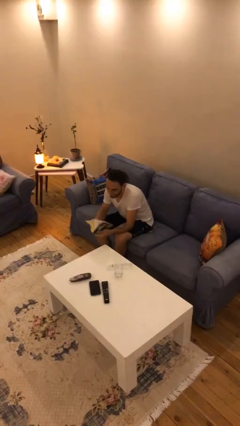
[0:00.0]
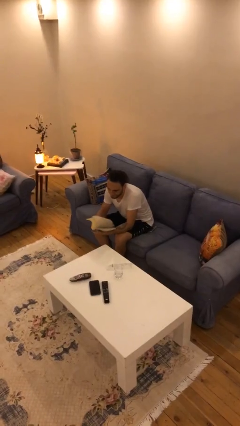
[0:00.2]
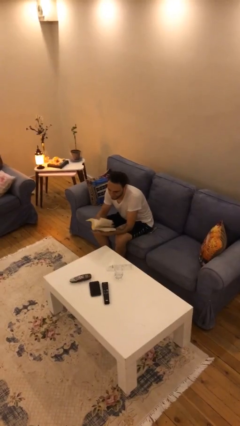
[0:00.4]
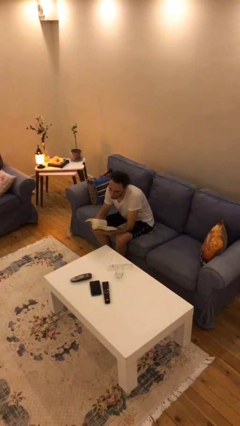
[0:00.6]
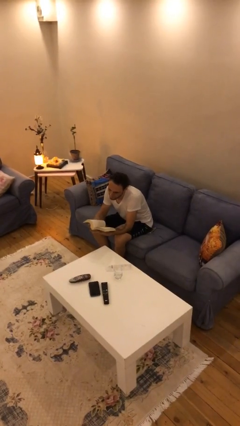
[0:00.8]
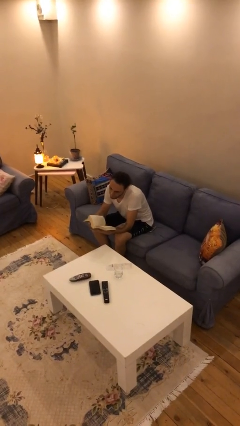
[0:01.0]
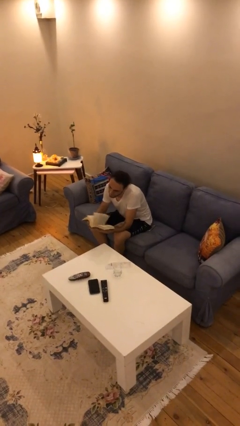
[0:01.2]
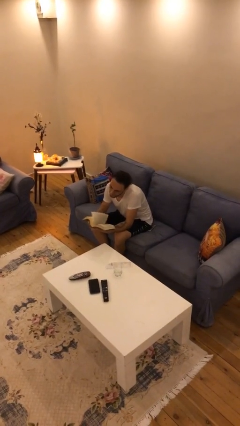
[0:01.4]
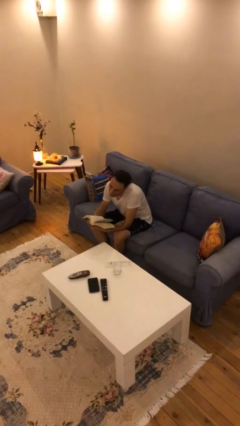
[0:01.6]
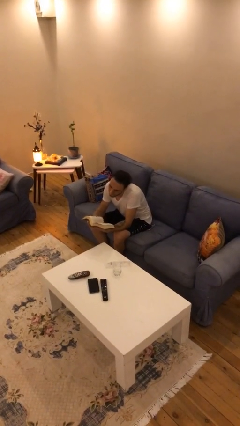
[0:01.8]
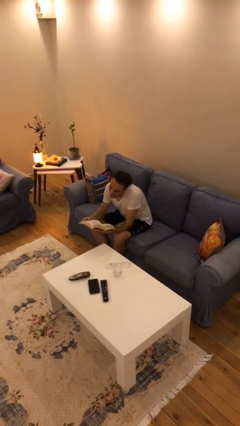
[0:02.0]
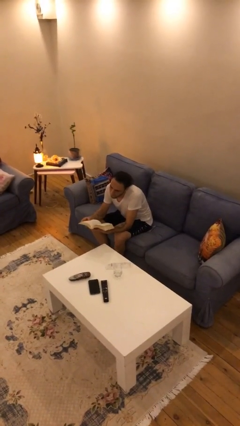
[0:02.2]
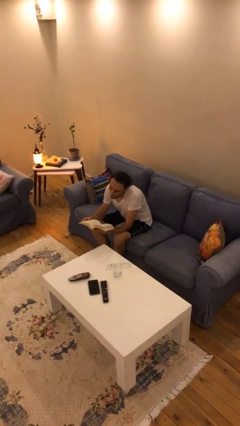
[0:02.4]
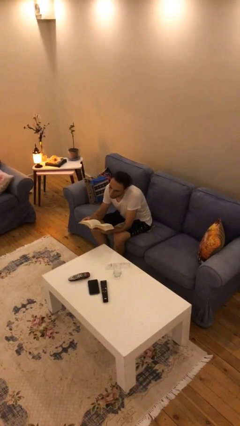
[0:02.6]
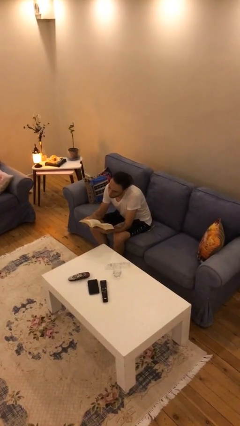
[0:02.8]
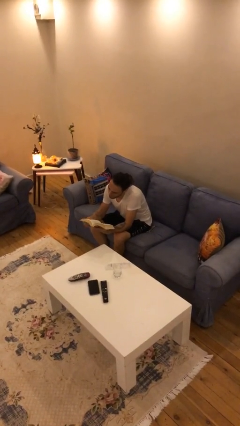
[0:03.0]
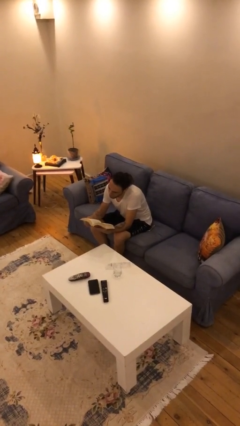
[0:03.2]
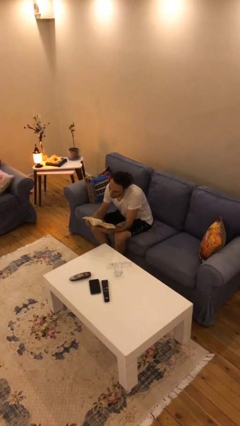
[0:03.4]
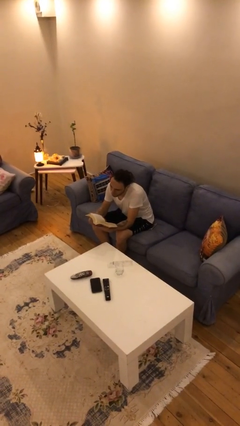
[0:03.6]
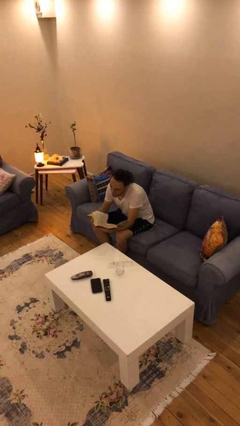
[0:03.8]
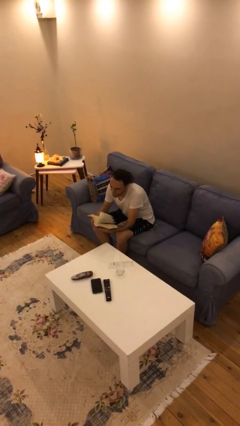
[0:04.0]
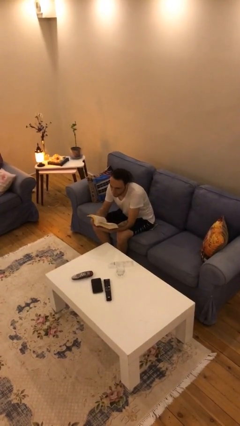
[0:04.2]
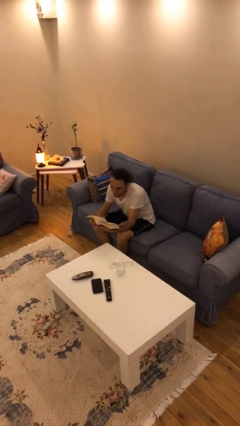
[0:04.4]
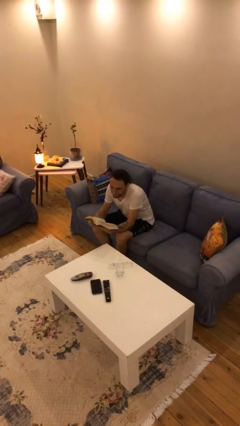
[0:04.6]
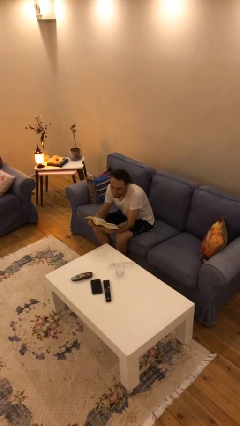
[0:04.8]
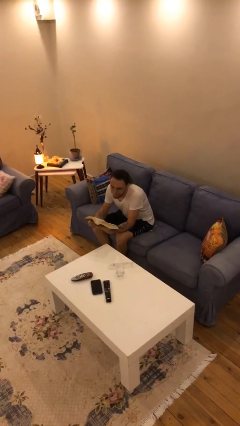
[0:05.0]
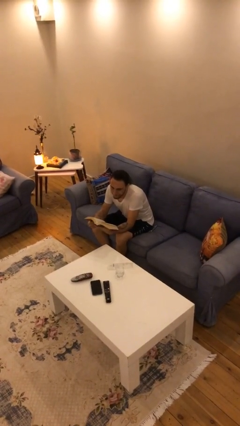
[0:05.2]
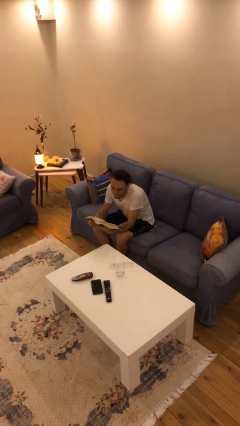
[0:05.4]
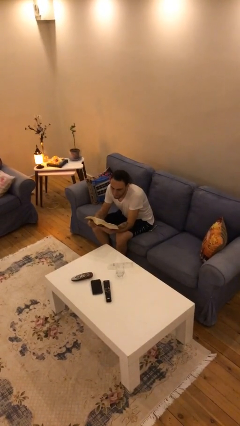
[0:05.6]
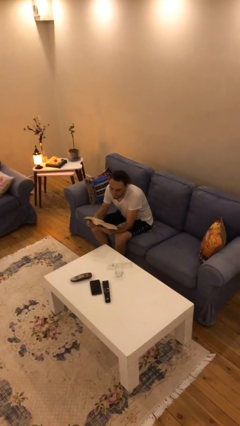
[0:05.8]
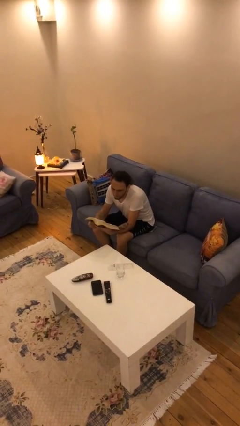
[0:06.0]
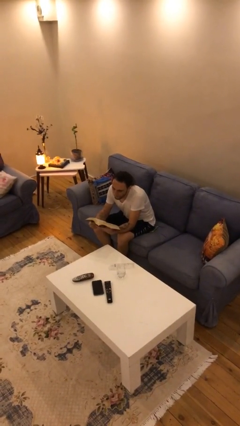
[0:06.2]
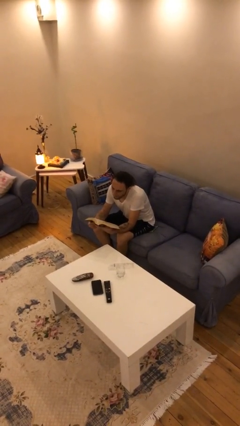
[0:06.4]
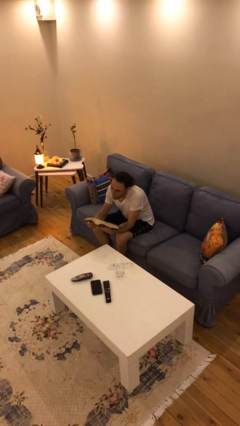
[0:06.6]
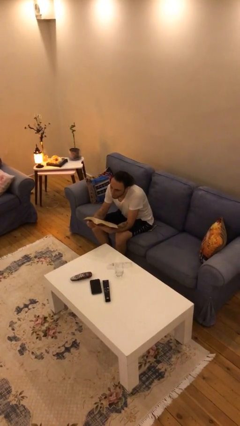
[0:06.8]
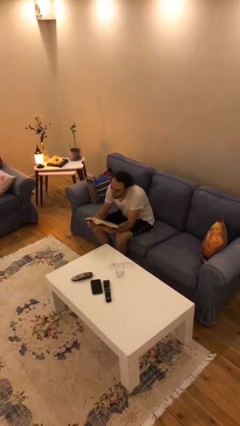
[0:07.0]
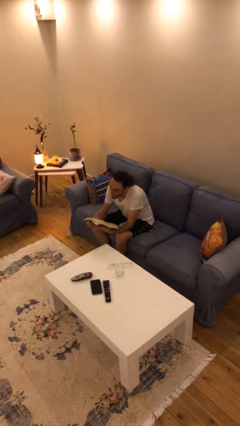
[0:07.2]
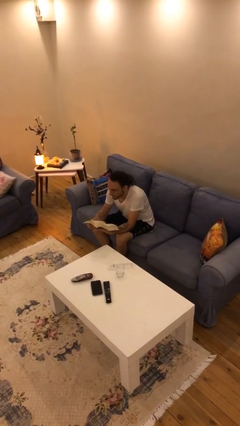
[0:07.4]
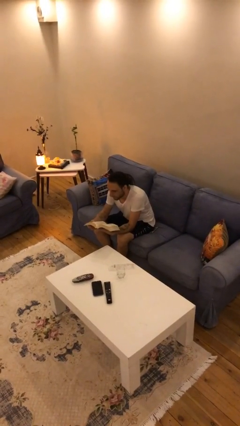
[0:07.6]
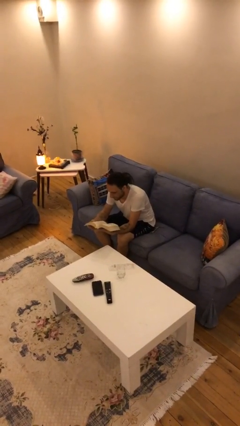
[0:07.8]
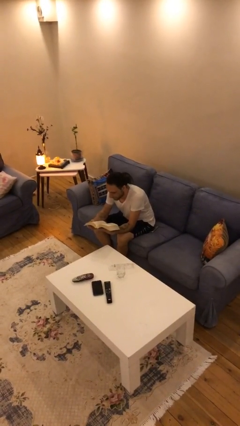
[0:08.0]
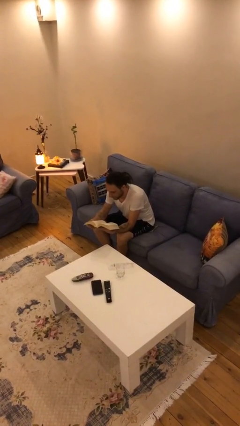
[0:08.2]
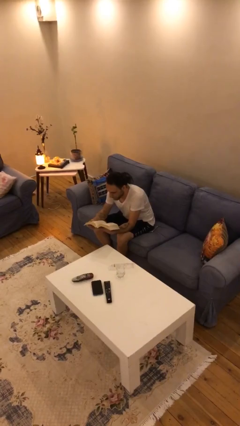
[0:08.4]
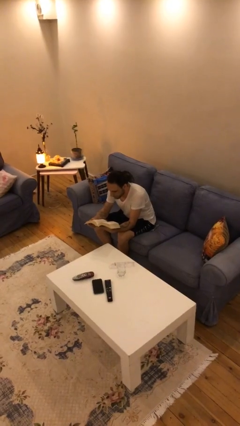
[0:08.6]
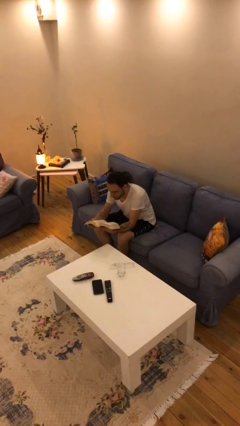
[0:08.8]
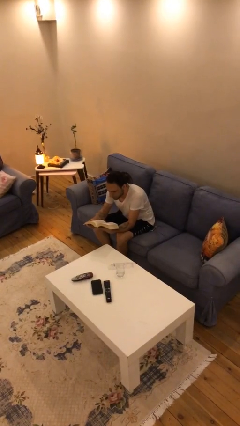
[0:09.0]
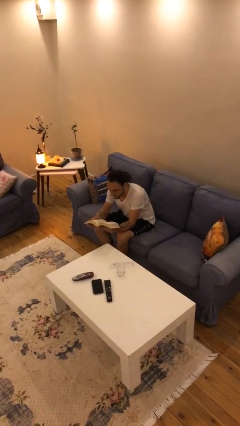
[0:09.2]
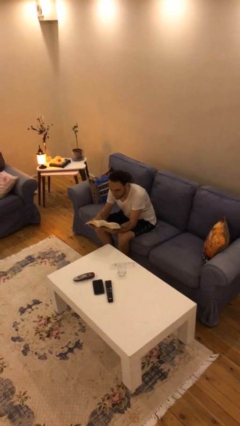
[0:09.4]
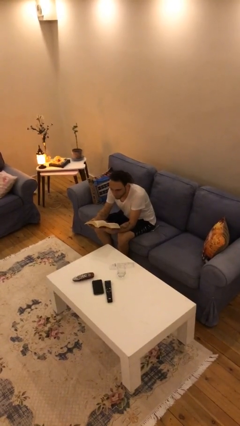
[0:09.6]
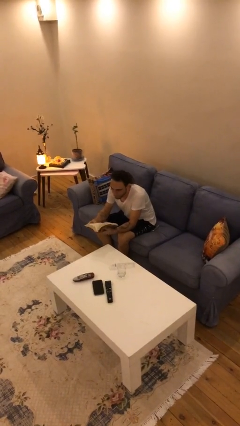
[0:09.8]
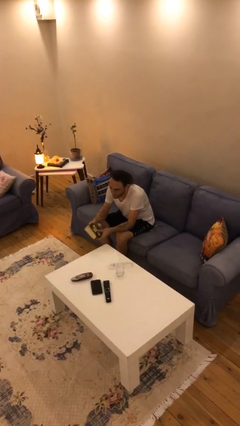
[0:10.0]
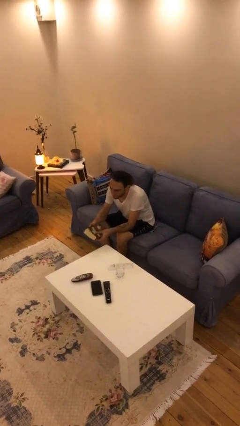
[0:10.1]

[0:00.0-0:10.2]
person reads document

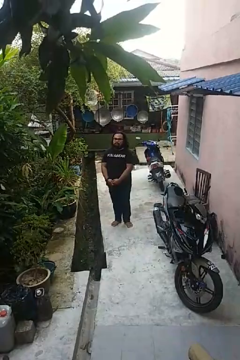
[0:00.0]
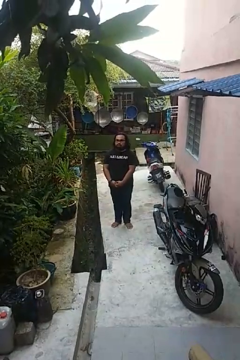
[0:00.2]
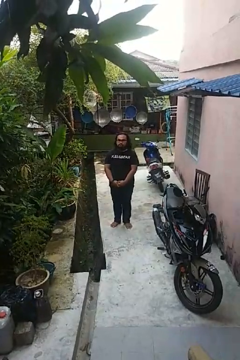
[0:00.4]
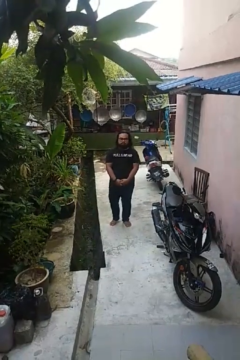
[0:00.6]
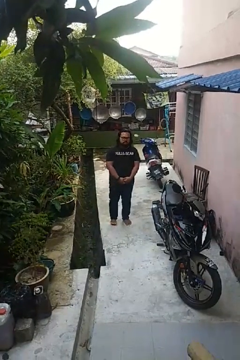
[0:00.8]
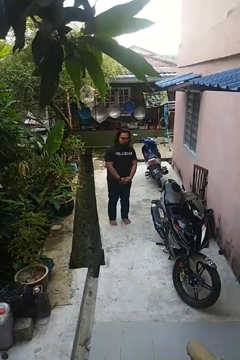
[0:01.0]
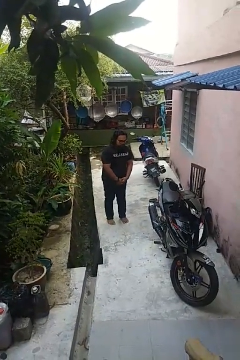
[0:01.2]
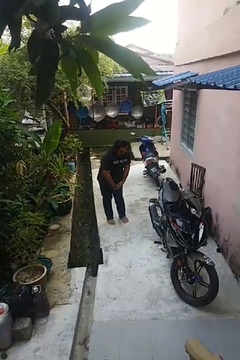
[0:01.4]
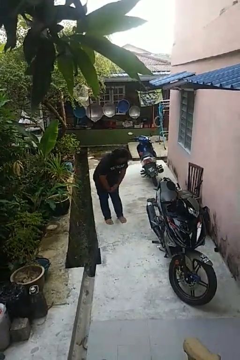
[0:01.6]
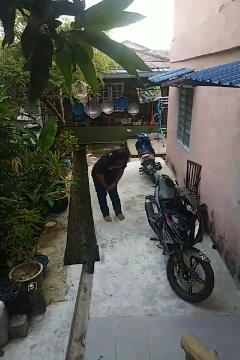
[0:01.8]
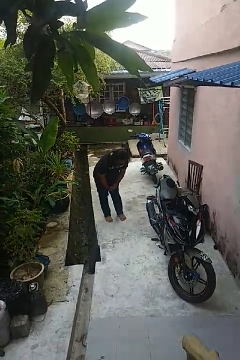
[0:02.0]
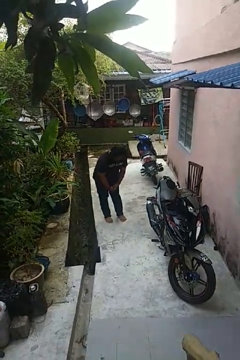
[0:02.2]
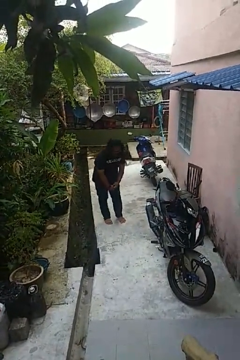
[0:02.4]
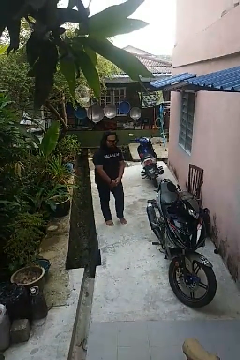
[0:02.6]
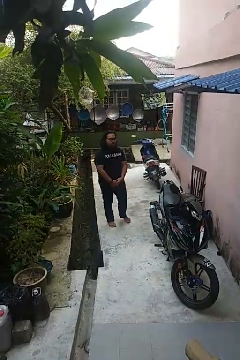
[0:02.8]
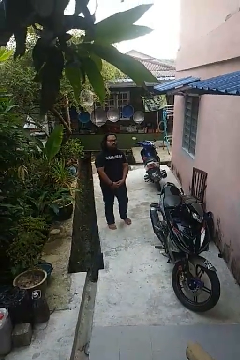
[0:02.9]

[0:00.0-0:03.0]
person bows

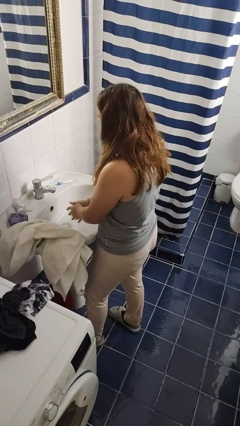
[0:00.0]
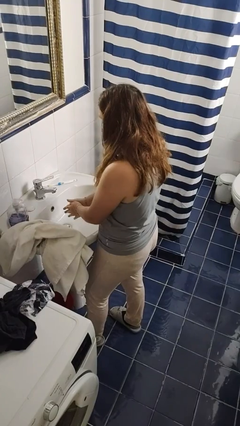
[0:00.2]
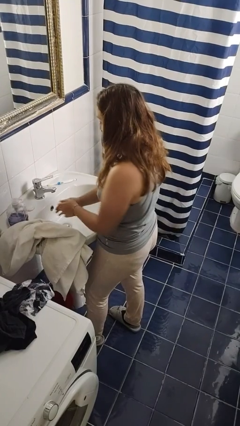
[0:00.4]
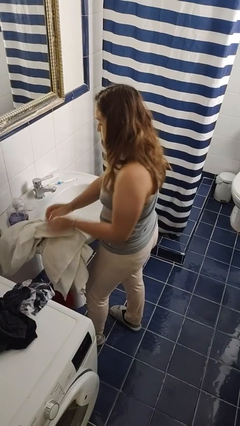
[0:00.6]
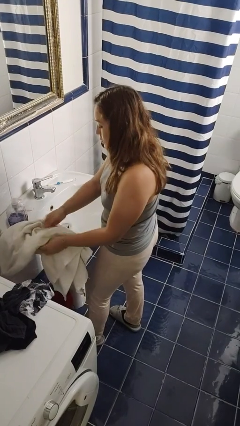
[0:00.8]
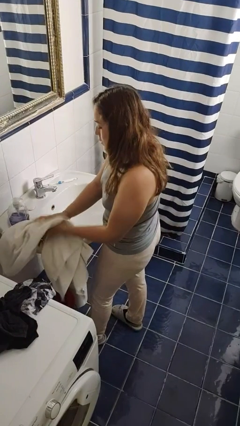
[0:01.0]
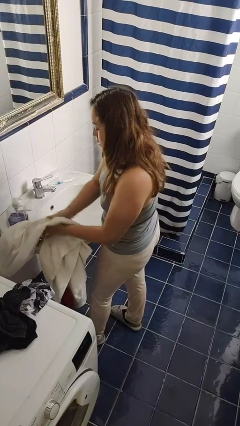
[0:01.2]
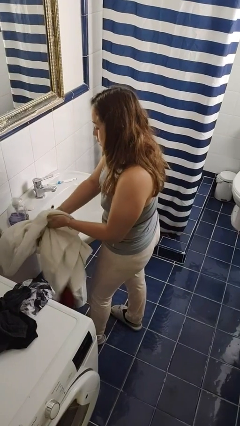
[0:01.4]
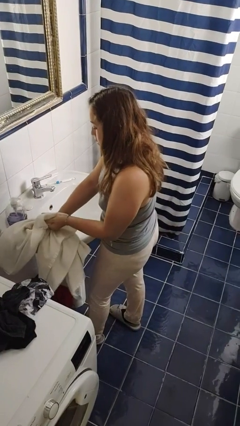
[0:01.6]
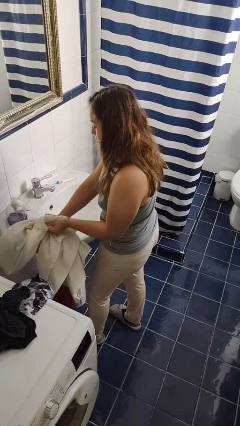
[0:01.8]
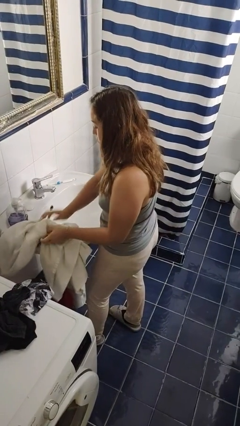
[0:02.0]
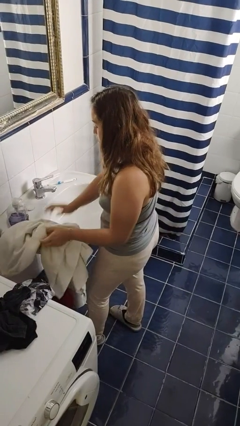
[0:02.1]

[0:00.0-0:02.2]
person dries hands with towel

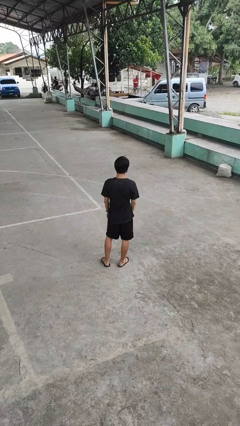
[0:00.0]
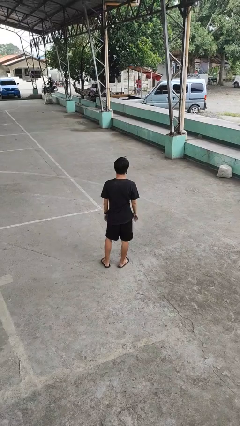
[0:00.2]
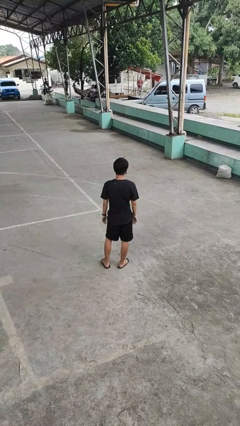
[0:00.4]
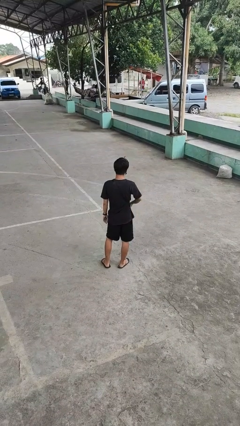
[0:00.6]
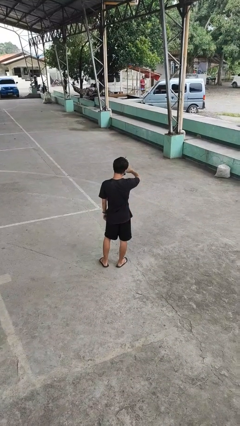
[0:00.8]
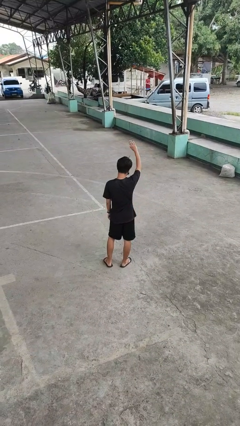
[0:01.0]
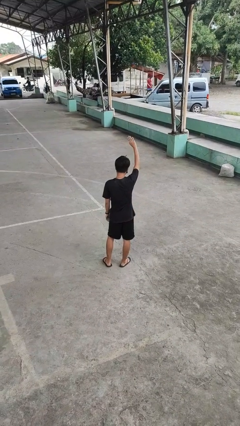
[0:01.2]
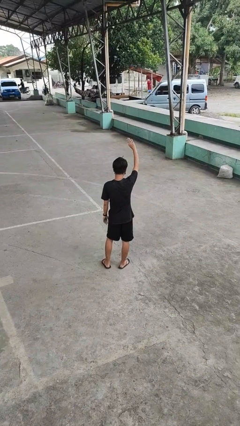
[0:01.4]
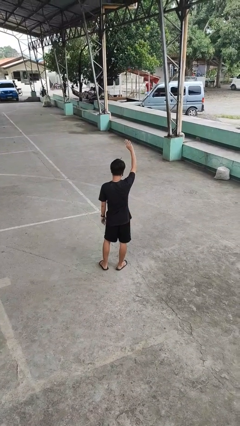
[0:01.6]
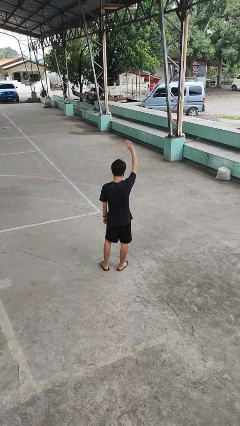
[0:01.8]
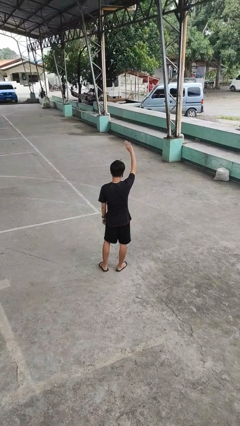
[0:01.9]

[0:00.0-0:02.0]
person gestures swipe up

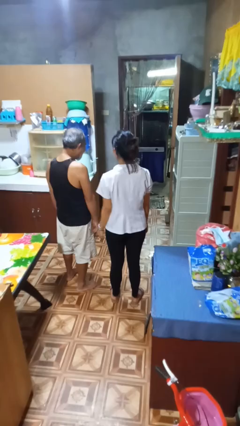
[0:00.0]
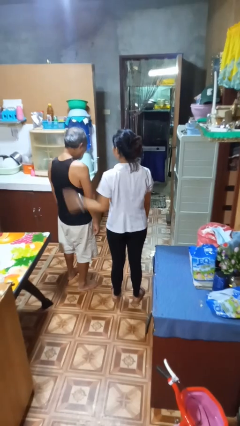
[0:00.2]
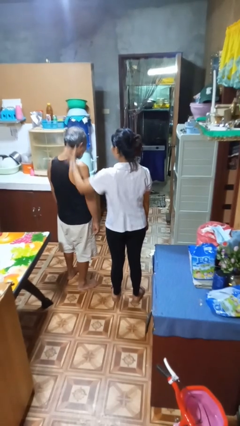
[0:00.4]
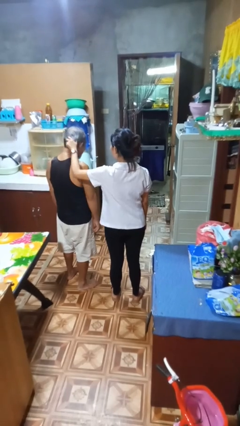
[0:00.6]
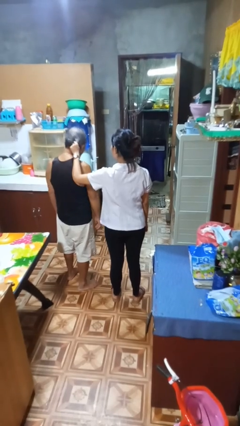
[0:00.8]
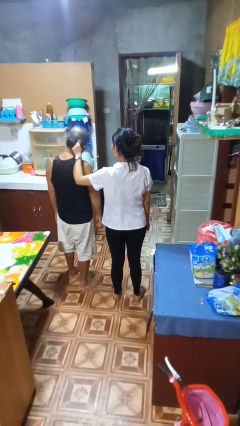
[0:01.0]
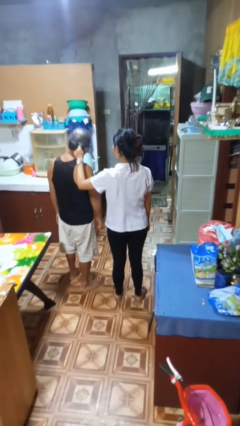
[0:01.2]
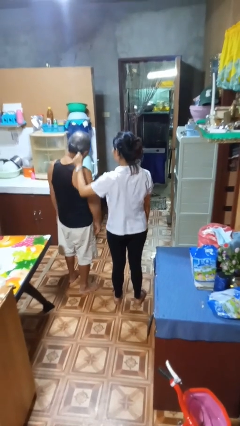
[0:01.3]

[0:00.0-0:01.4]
person grabs person by hair
